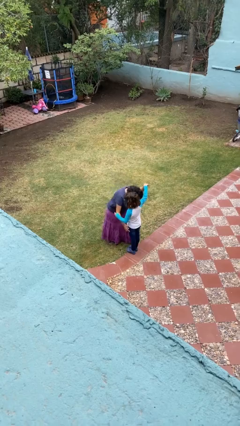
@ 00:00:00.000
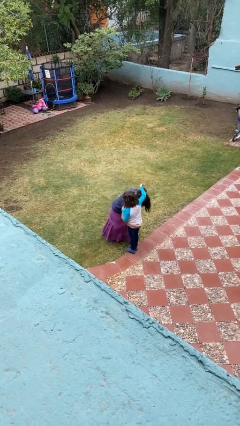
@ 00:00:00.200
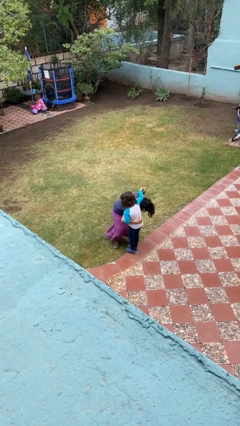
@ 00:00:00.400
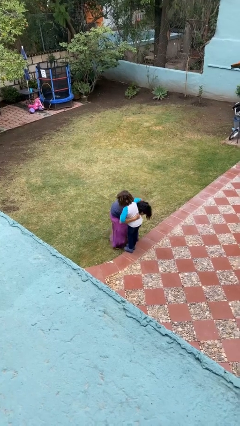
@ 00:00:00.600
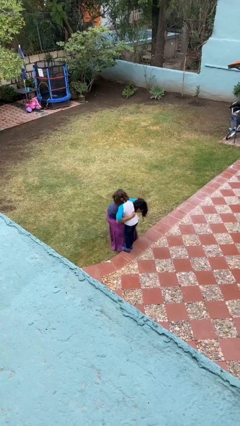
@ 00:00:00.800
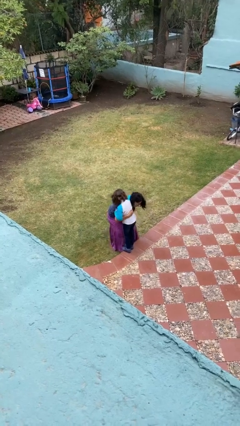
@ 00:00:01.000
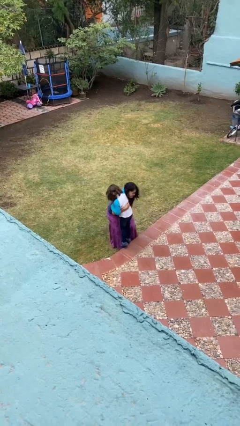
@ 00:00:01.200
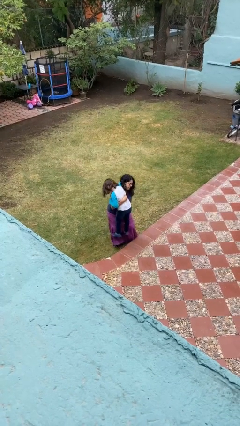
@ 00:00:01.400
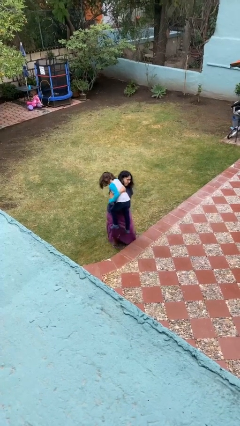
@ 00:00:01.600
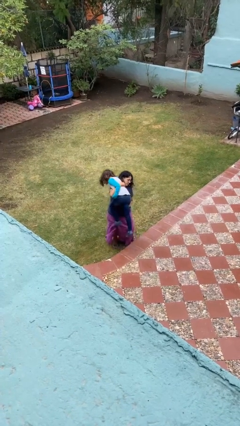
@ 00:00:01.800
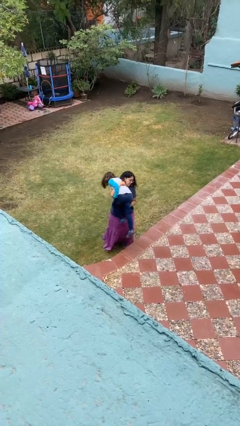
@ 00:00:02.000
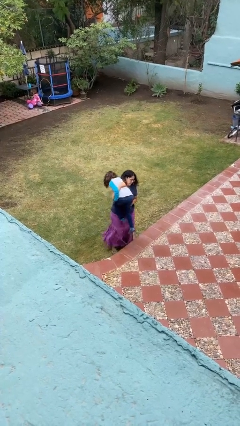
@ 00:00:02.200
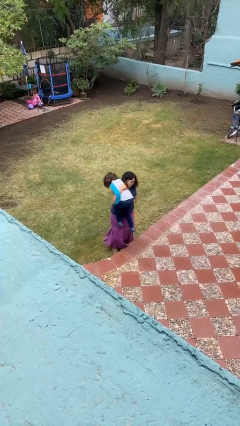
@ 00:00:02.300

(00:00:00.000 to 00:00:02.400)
person carries person over shoulder

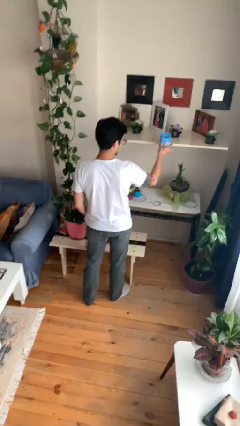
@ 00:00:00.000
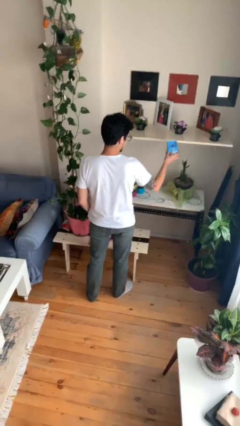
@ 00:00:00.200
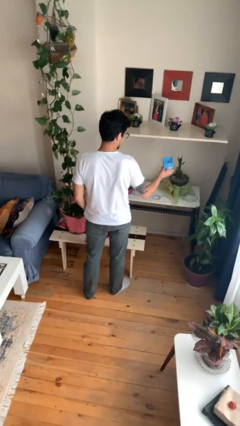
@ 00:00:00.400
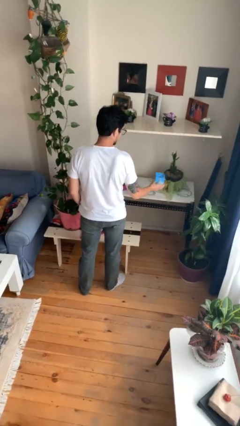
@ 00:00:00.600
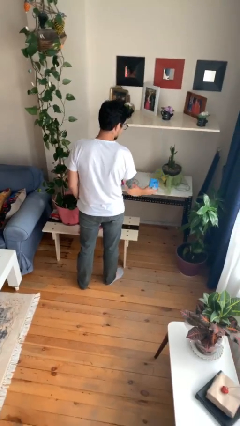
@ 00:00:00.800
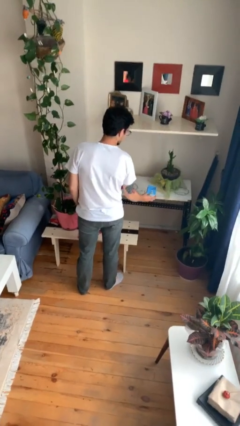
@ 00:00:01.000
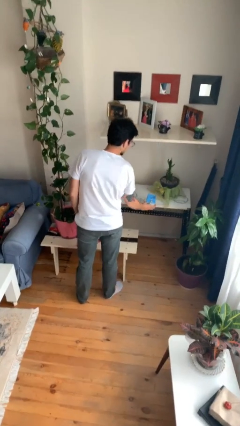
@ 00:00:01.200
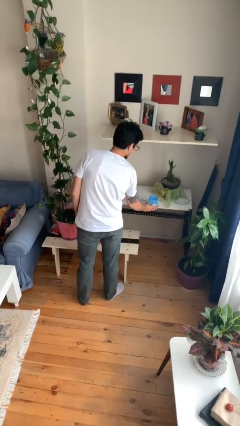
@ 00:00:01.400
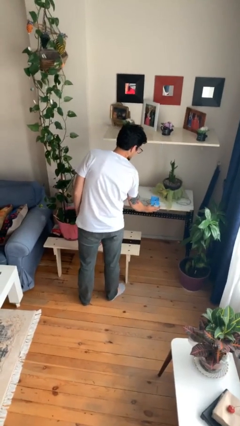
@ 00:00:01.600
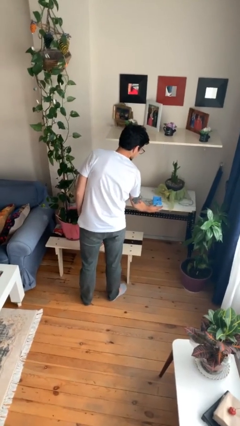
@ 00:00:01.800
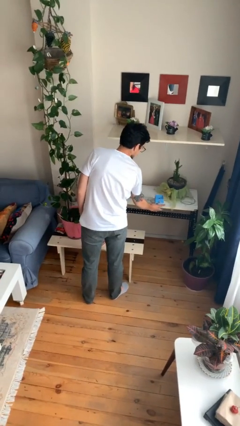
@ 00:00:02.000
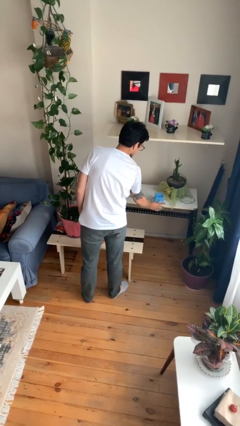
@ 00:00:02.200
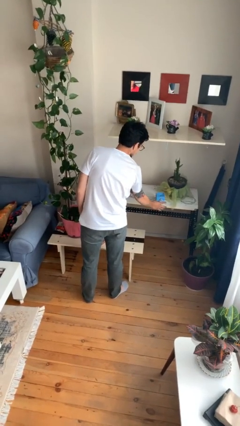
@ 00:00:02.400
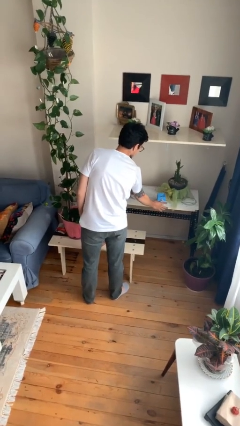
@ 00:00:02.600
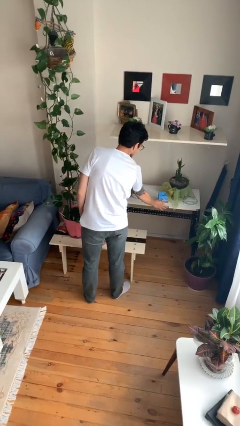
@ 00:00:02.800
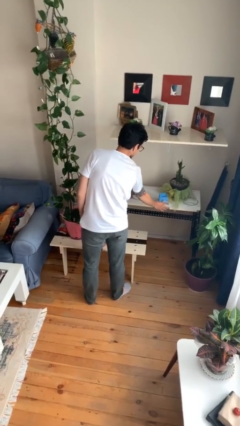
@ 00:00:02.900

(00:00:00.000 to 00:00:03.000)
person puts down object on table

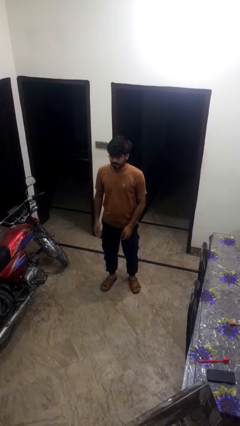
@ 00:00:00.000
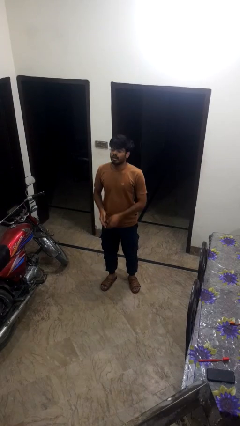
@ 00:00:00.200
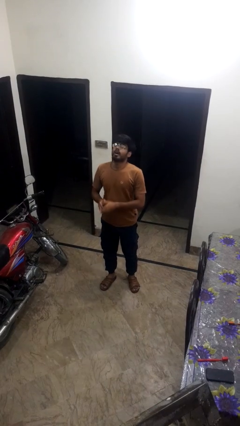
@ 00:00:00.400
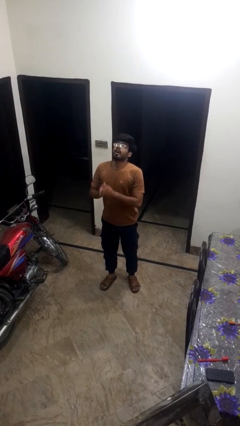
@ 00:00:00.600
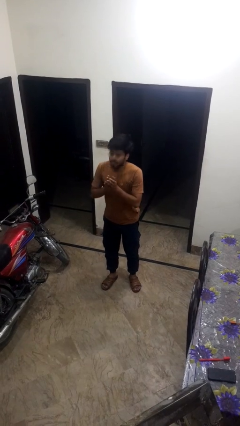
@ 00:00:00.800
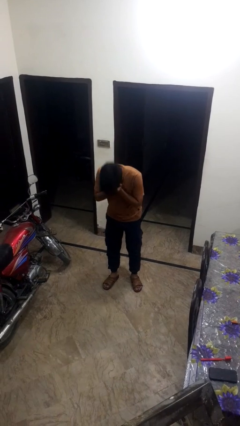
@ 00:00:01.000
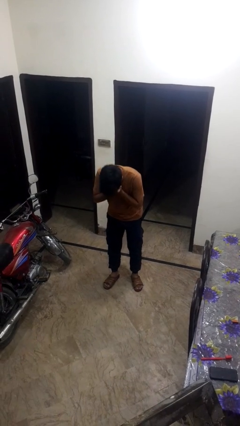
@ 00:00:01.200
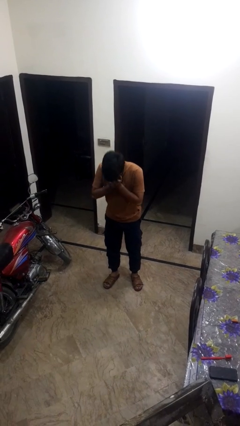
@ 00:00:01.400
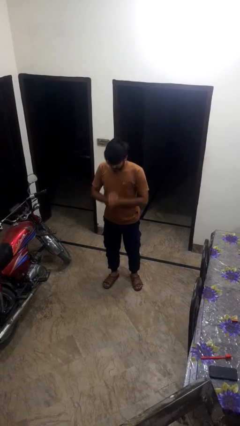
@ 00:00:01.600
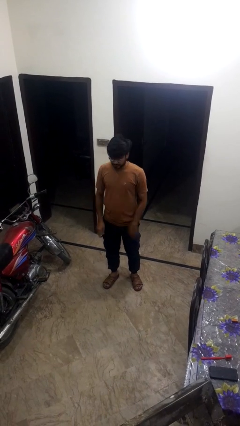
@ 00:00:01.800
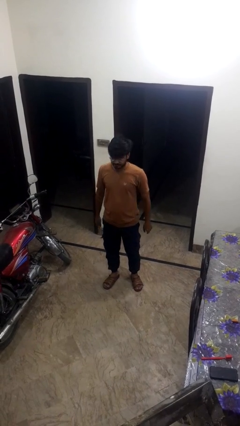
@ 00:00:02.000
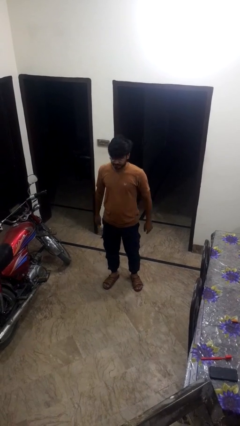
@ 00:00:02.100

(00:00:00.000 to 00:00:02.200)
person sneezes into hand

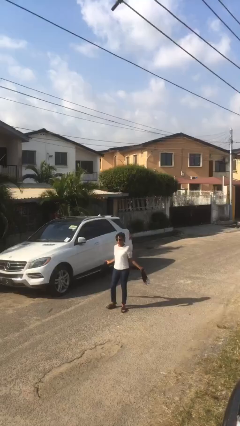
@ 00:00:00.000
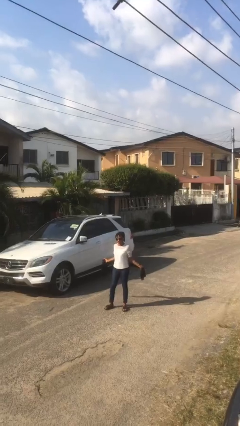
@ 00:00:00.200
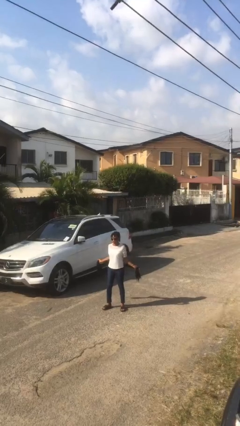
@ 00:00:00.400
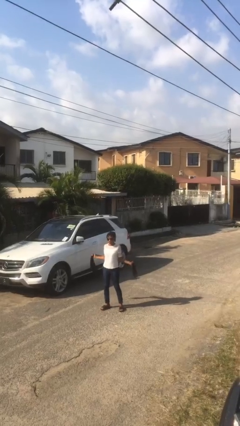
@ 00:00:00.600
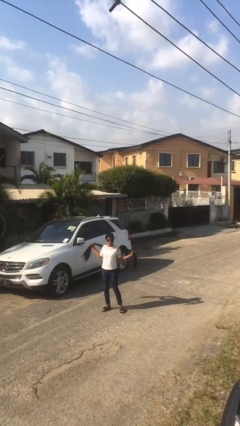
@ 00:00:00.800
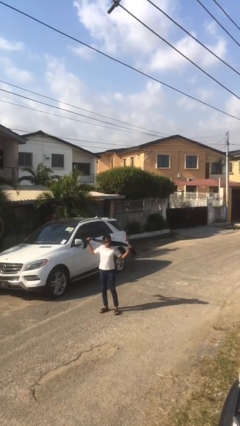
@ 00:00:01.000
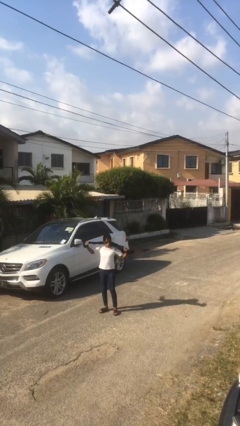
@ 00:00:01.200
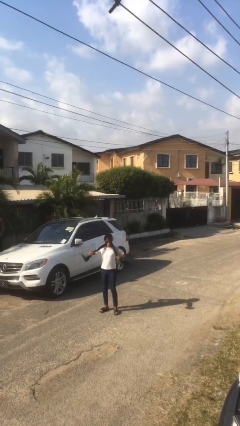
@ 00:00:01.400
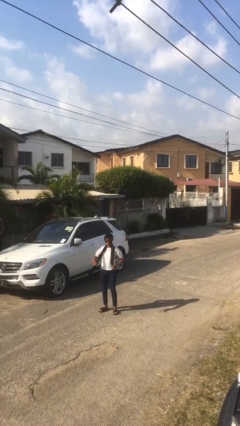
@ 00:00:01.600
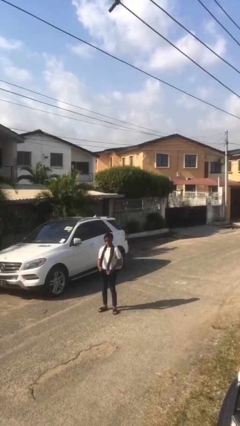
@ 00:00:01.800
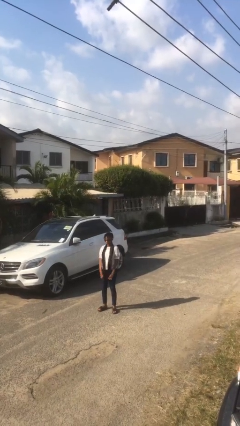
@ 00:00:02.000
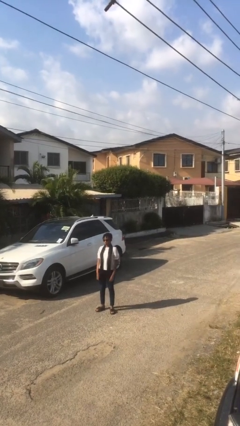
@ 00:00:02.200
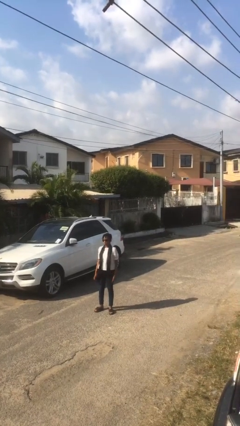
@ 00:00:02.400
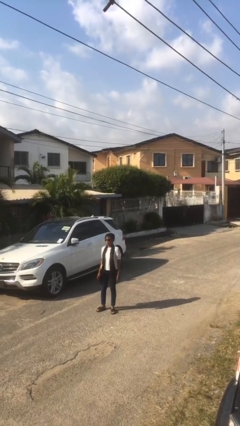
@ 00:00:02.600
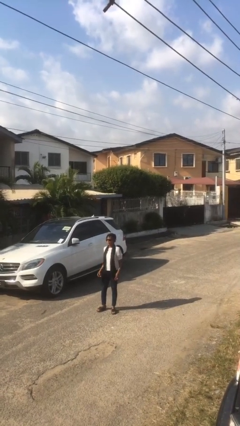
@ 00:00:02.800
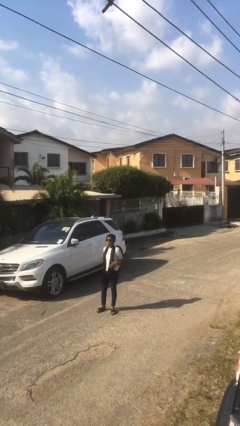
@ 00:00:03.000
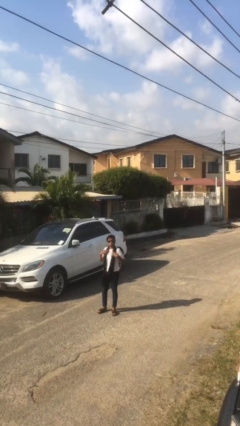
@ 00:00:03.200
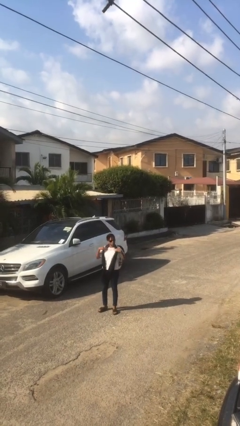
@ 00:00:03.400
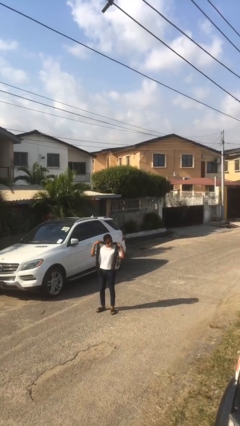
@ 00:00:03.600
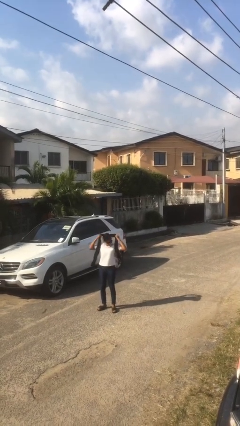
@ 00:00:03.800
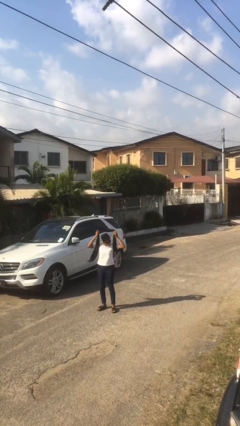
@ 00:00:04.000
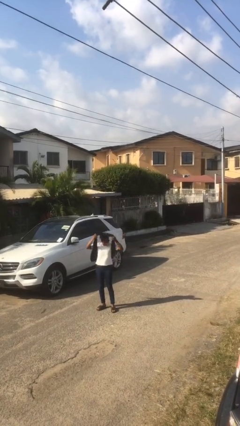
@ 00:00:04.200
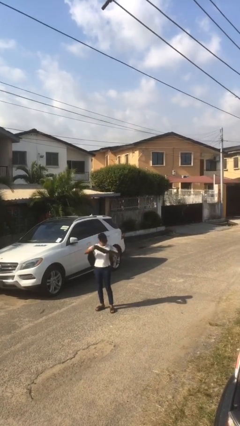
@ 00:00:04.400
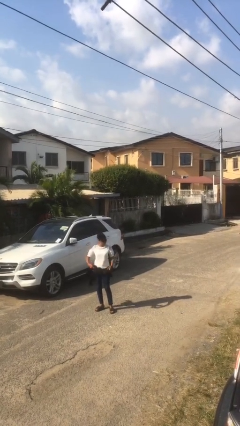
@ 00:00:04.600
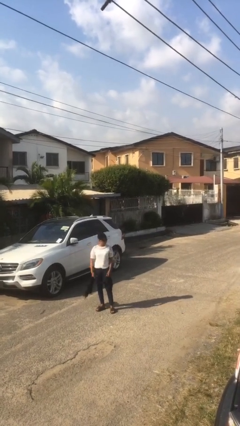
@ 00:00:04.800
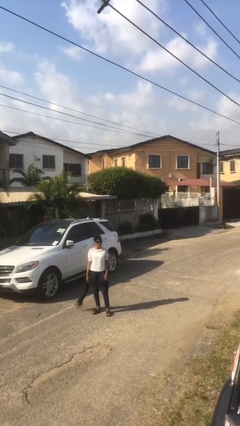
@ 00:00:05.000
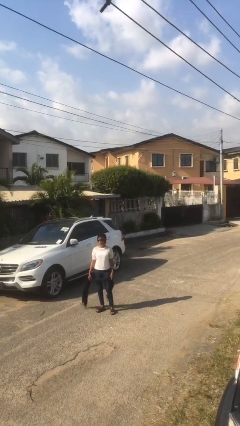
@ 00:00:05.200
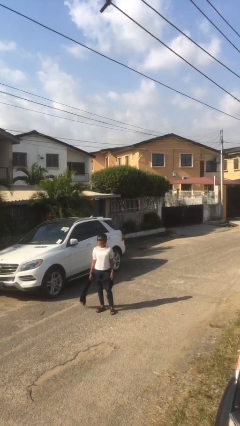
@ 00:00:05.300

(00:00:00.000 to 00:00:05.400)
person puts on scarf

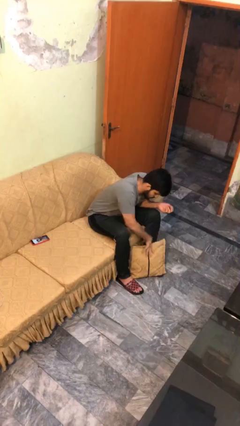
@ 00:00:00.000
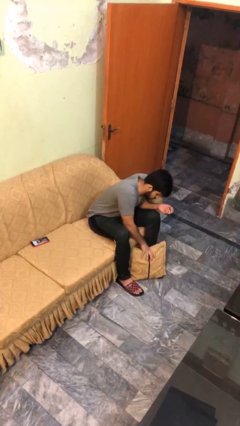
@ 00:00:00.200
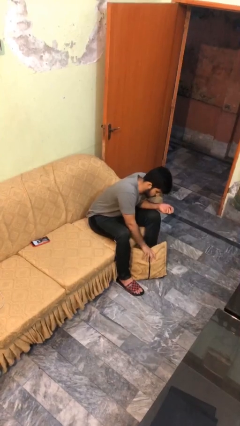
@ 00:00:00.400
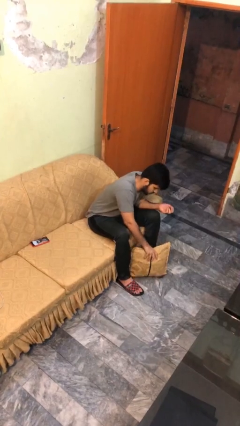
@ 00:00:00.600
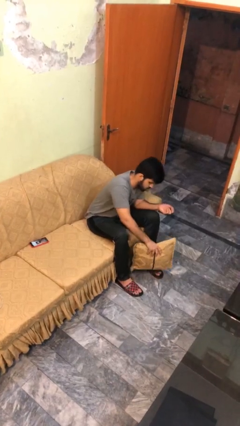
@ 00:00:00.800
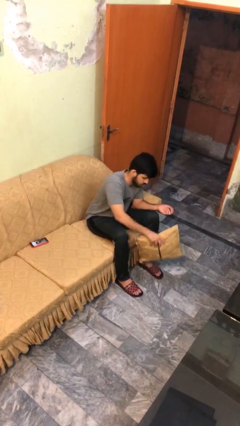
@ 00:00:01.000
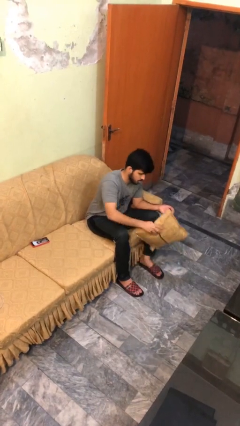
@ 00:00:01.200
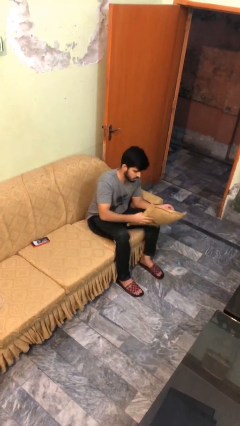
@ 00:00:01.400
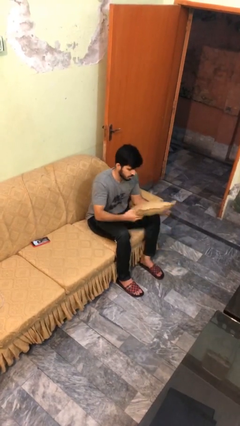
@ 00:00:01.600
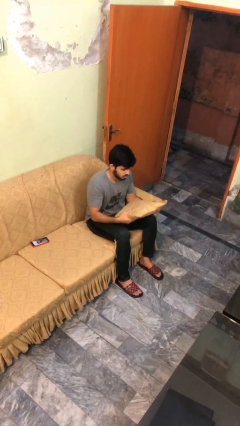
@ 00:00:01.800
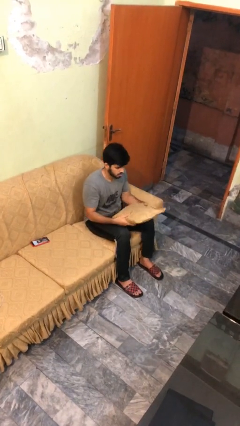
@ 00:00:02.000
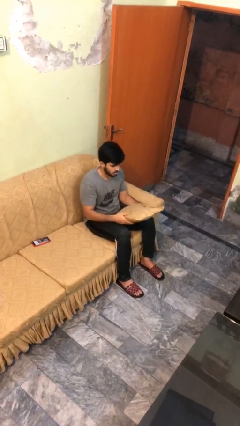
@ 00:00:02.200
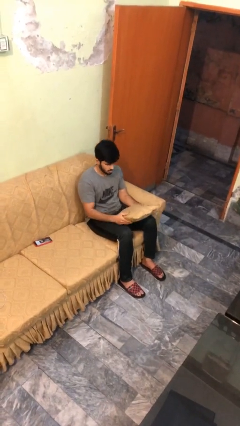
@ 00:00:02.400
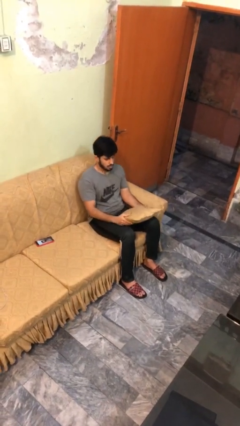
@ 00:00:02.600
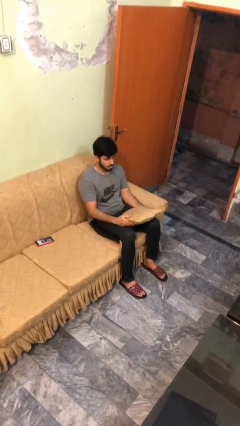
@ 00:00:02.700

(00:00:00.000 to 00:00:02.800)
person picks up object from floor

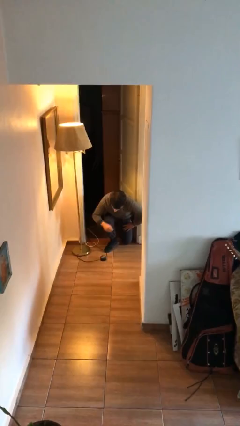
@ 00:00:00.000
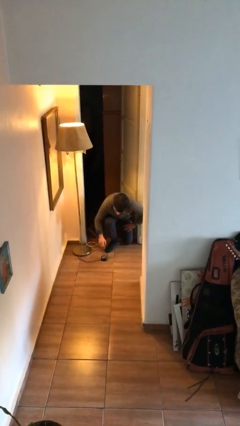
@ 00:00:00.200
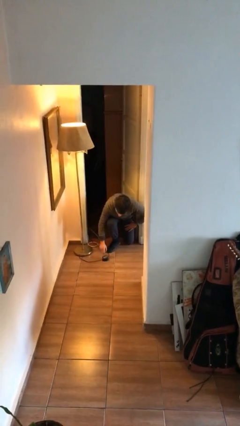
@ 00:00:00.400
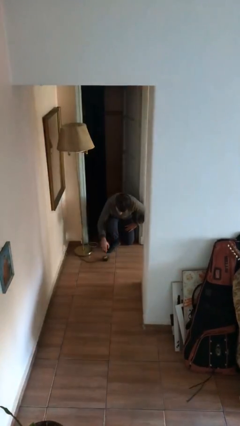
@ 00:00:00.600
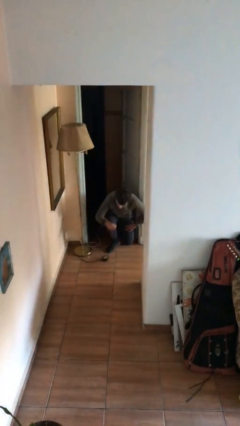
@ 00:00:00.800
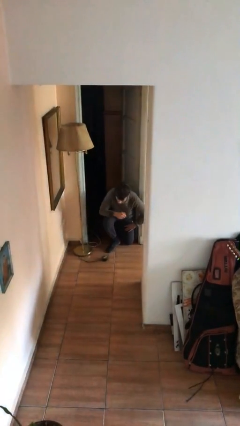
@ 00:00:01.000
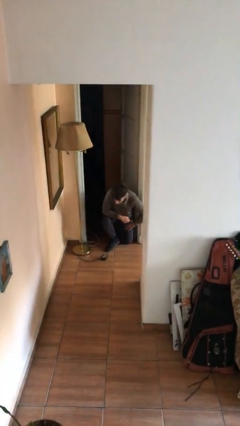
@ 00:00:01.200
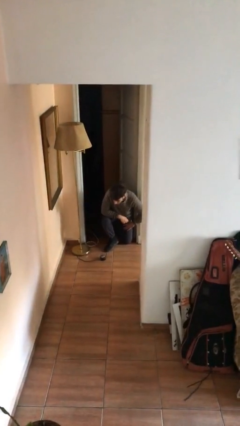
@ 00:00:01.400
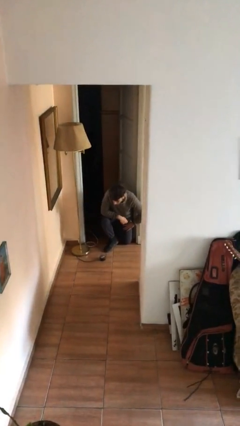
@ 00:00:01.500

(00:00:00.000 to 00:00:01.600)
person turns off lamp
